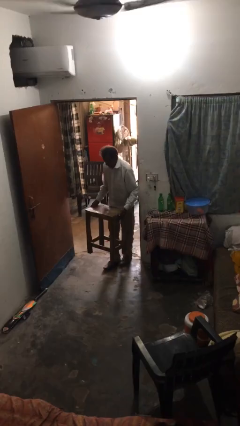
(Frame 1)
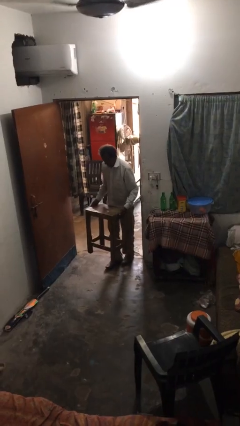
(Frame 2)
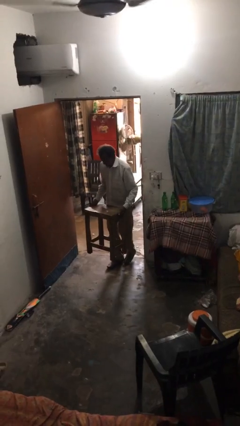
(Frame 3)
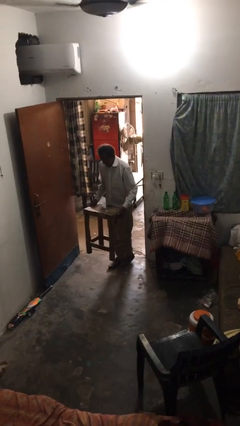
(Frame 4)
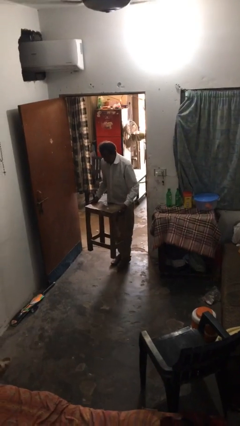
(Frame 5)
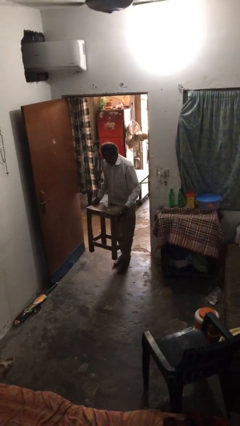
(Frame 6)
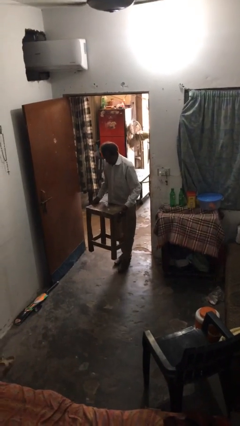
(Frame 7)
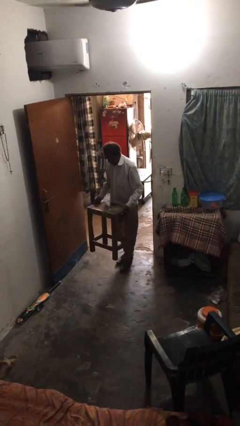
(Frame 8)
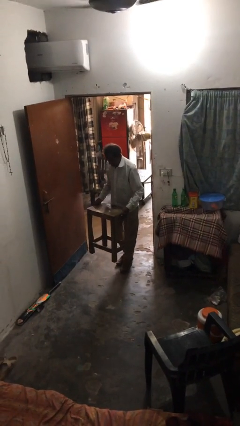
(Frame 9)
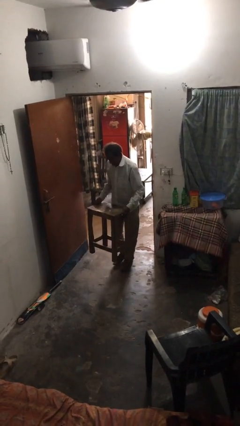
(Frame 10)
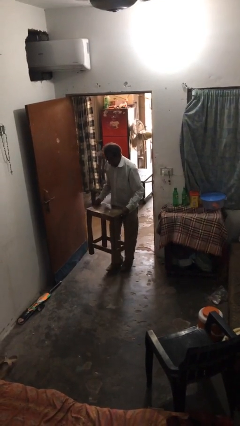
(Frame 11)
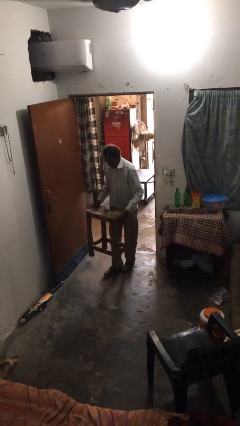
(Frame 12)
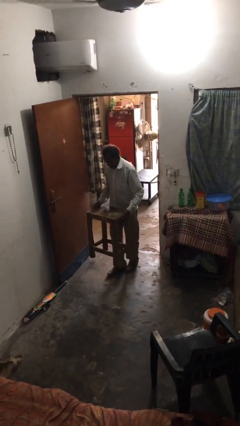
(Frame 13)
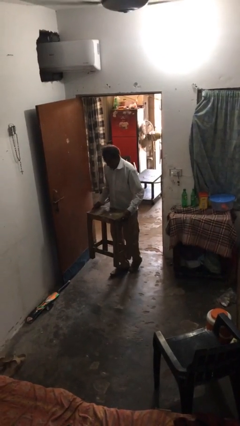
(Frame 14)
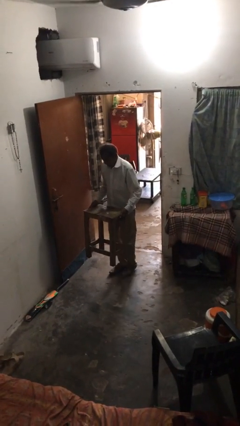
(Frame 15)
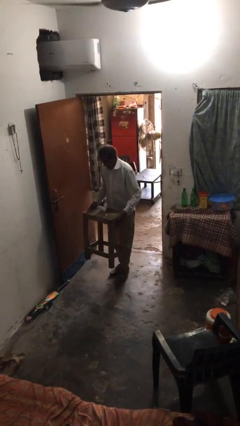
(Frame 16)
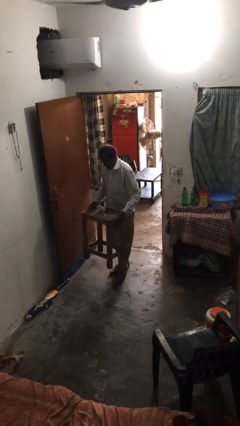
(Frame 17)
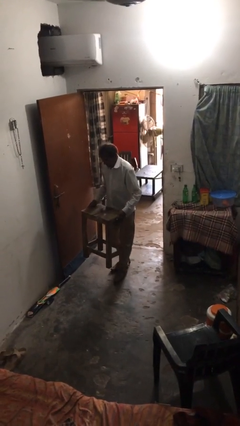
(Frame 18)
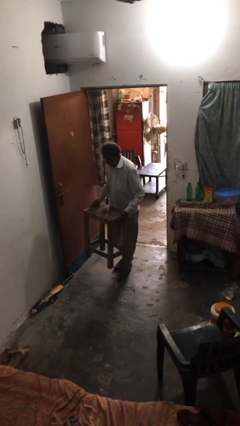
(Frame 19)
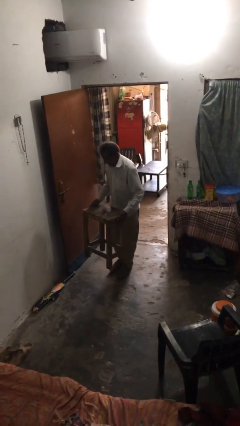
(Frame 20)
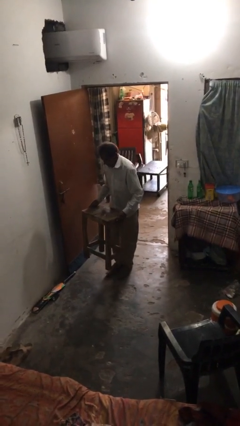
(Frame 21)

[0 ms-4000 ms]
person carries heavy object

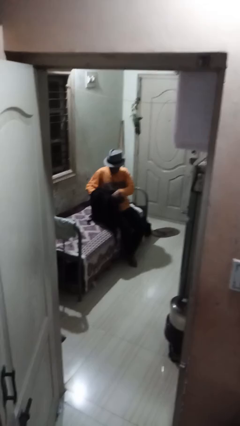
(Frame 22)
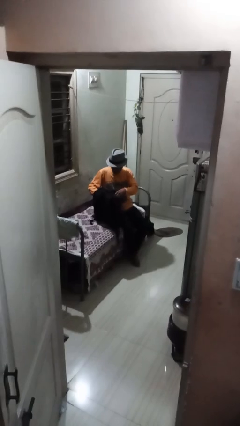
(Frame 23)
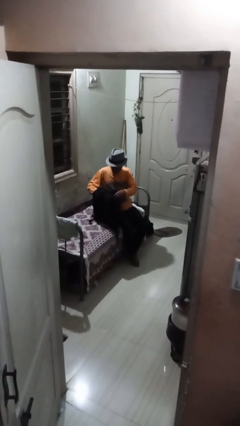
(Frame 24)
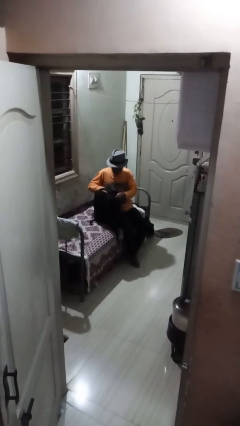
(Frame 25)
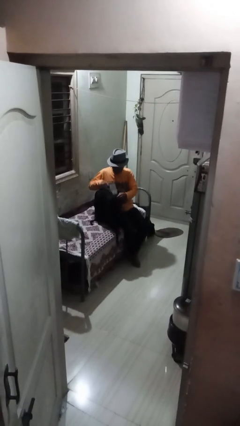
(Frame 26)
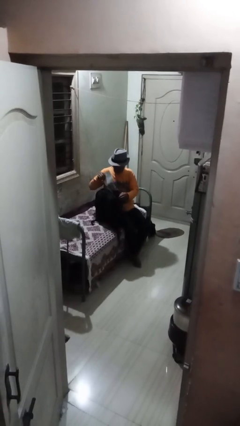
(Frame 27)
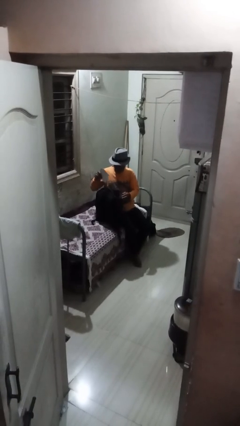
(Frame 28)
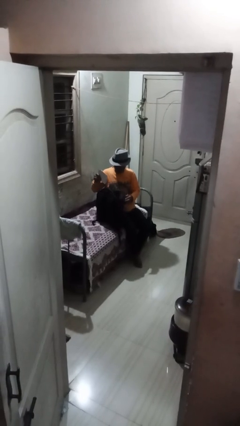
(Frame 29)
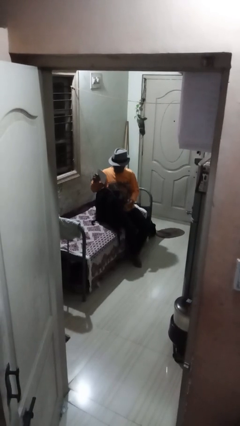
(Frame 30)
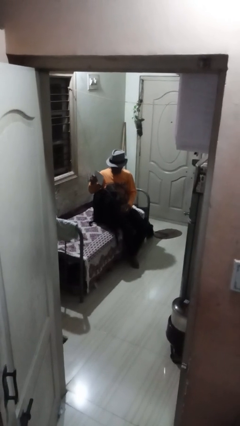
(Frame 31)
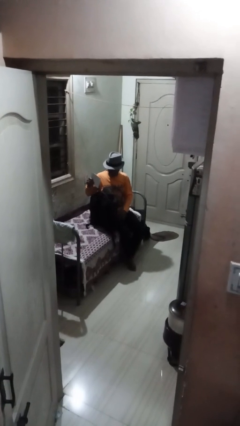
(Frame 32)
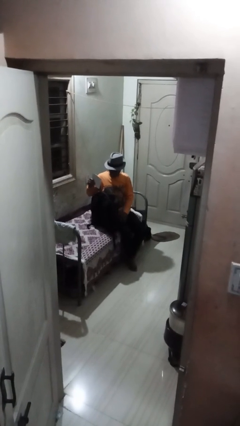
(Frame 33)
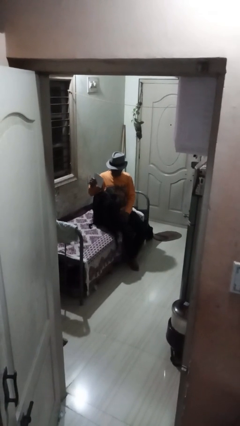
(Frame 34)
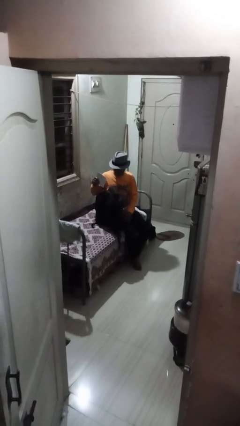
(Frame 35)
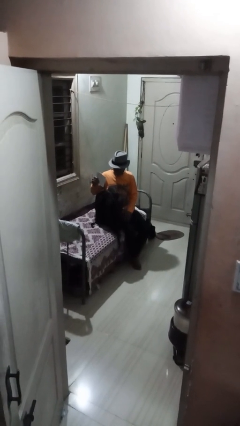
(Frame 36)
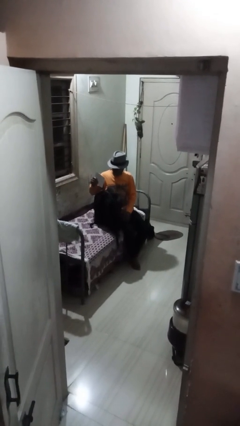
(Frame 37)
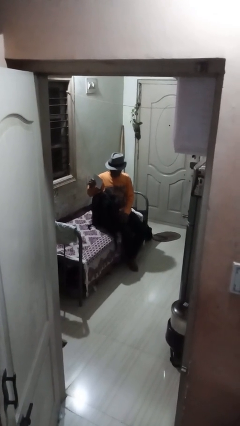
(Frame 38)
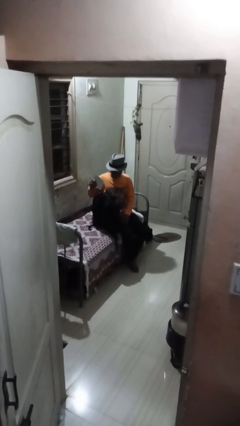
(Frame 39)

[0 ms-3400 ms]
person takes object from backpack

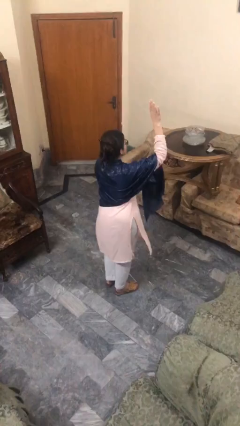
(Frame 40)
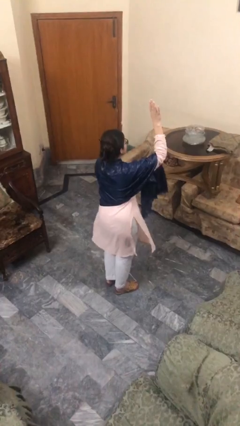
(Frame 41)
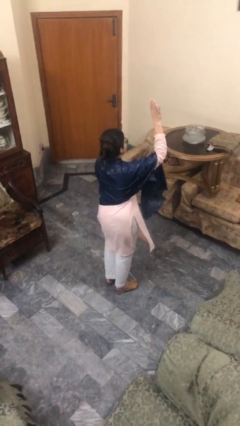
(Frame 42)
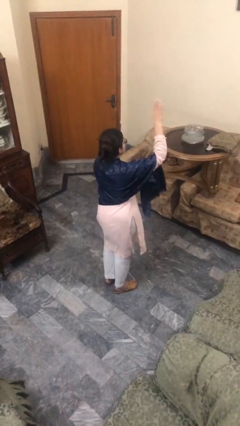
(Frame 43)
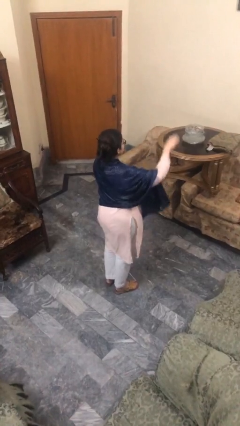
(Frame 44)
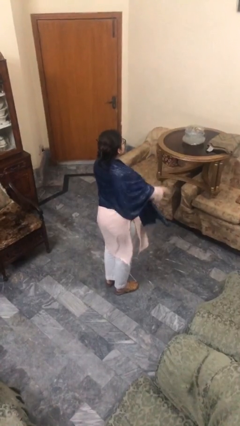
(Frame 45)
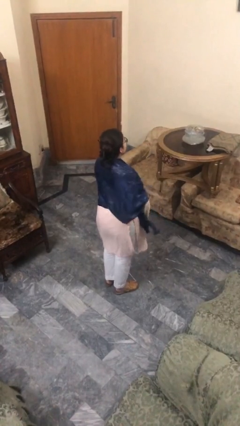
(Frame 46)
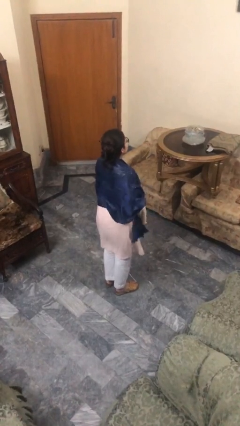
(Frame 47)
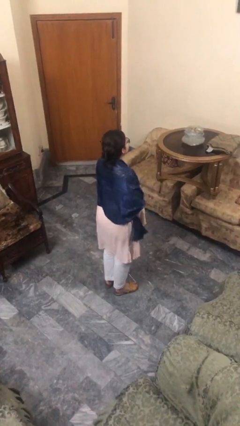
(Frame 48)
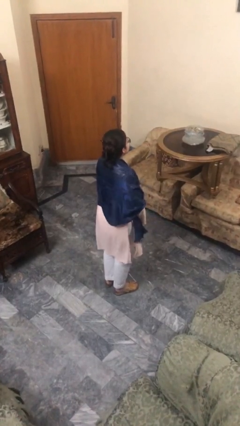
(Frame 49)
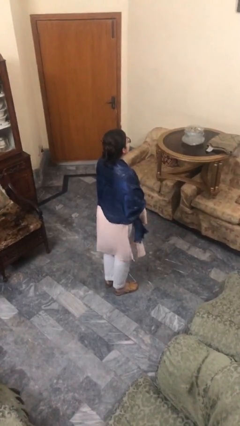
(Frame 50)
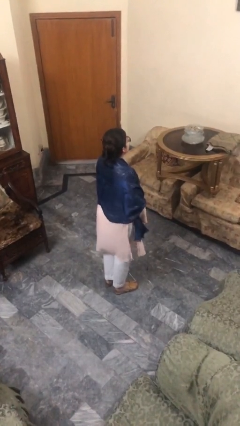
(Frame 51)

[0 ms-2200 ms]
person gestures lower hand

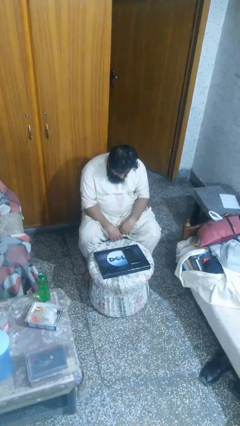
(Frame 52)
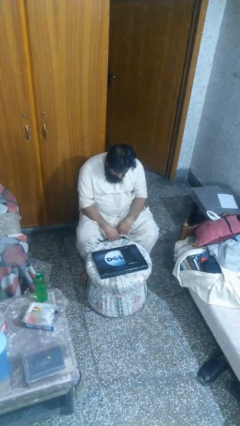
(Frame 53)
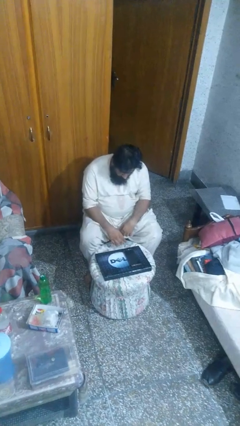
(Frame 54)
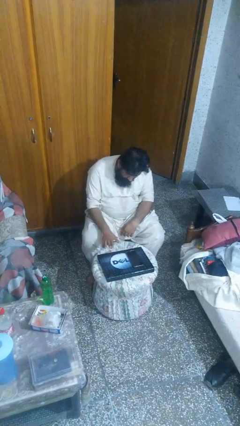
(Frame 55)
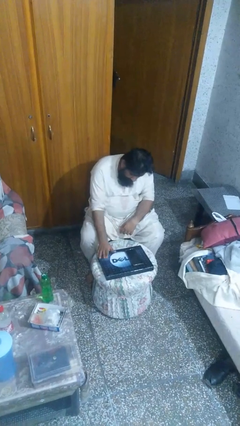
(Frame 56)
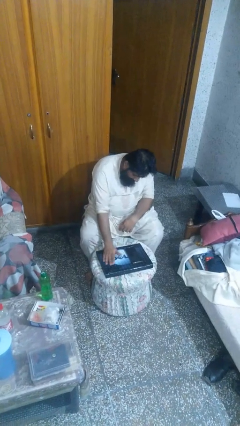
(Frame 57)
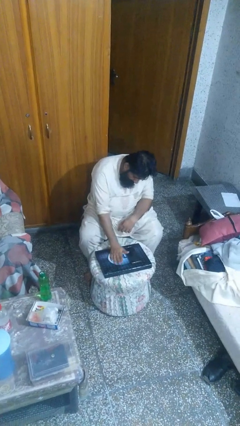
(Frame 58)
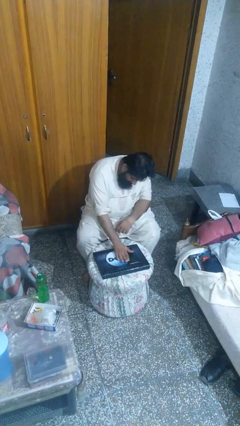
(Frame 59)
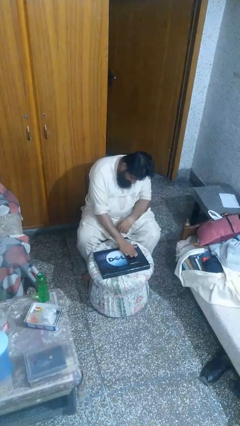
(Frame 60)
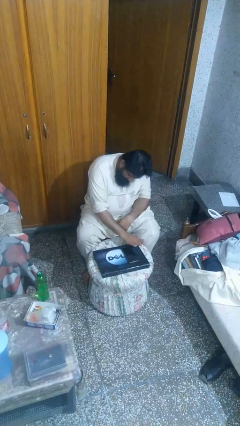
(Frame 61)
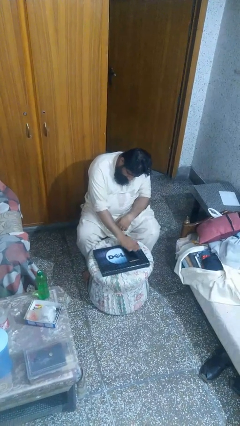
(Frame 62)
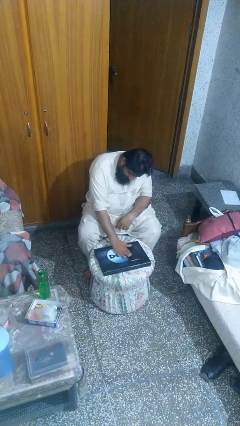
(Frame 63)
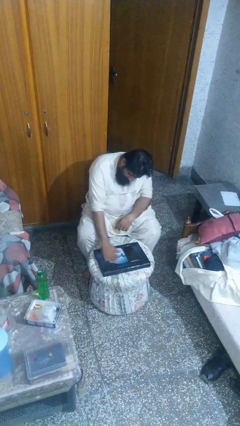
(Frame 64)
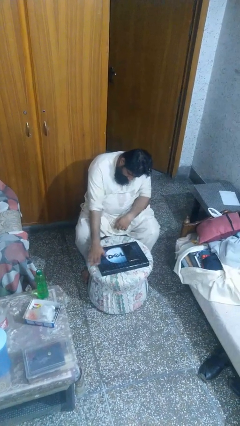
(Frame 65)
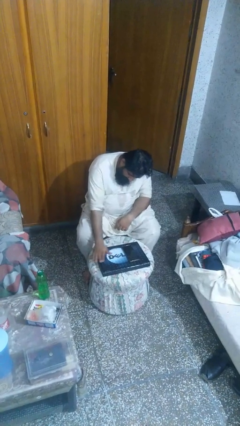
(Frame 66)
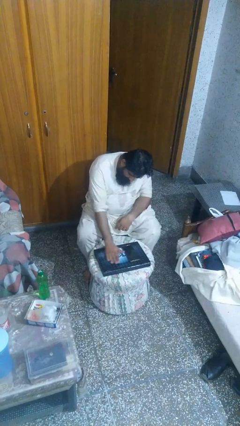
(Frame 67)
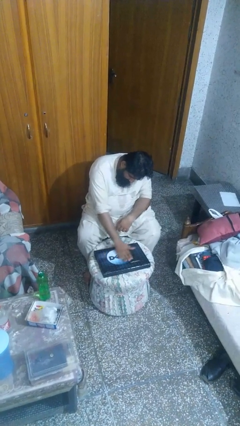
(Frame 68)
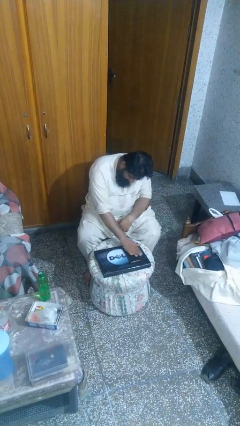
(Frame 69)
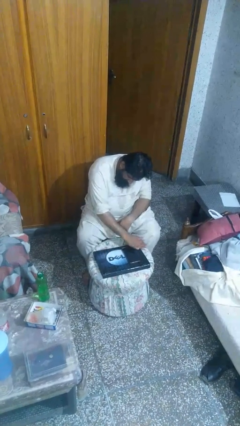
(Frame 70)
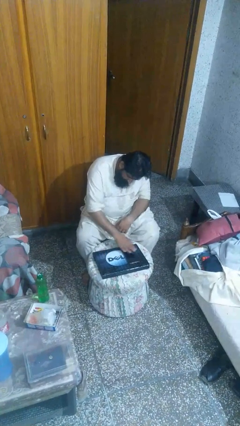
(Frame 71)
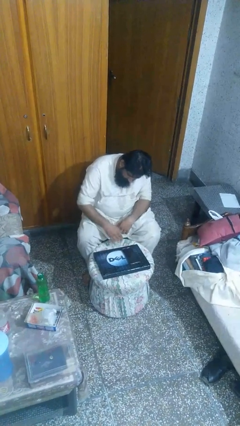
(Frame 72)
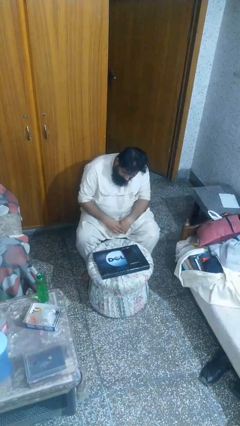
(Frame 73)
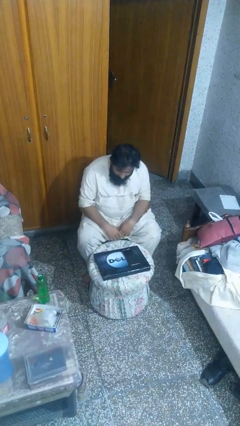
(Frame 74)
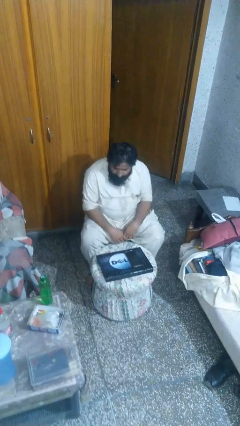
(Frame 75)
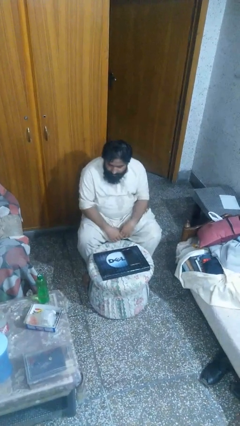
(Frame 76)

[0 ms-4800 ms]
person waves hand over object

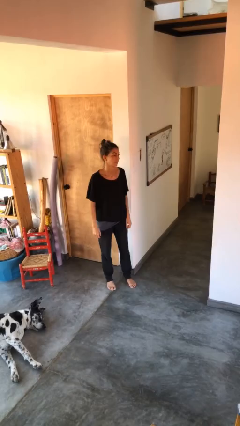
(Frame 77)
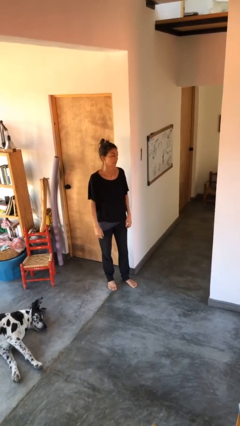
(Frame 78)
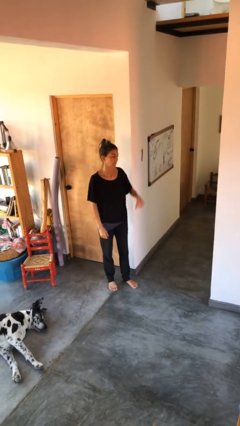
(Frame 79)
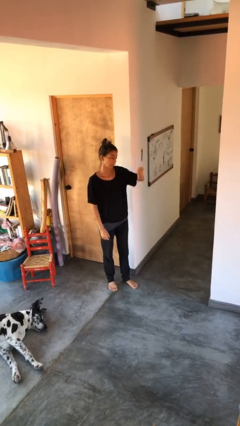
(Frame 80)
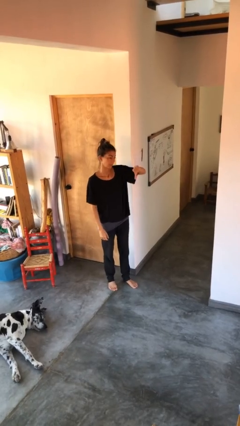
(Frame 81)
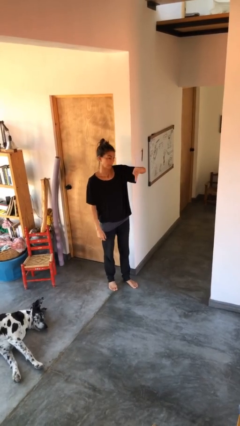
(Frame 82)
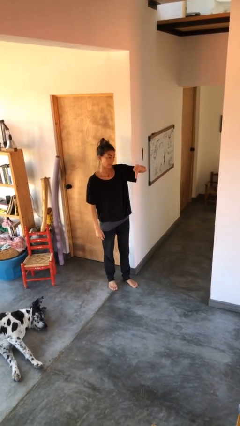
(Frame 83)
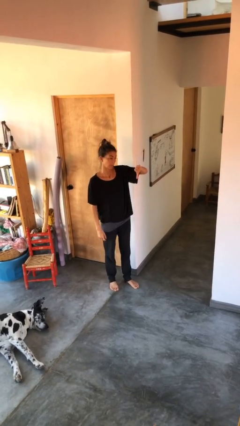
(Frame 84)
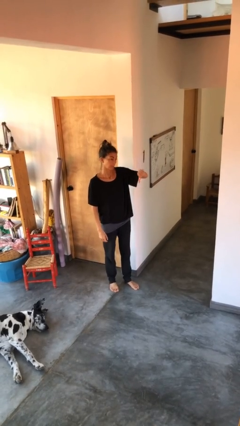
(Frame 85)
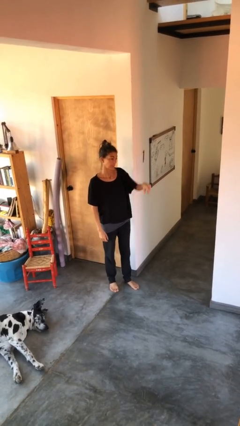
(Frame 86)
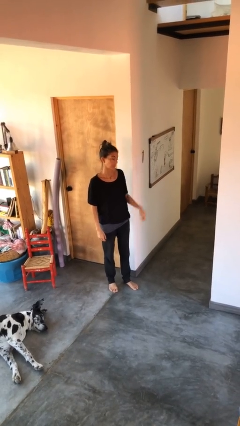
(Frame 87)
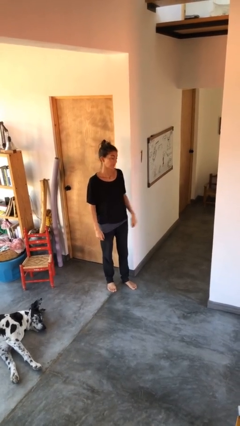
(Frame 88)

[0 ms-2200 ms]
person gestures thumbs down

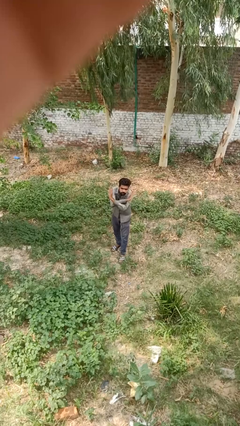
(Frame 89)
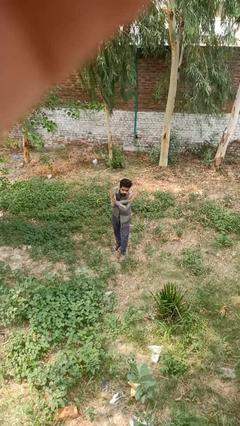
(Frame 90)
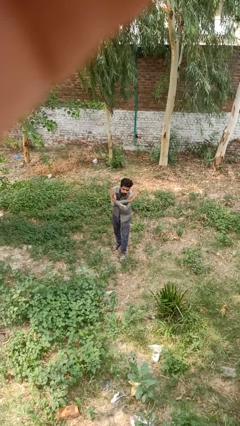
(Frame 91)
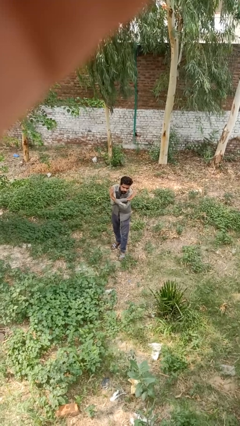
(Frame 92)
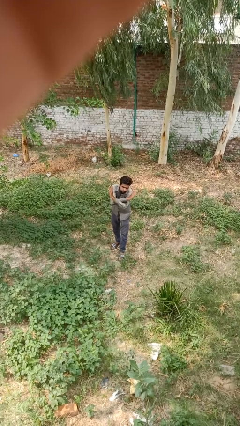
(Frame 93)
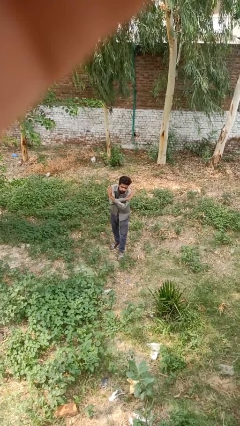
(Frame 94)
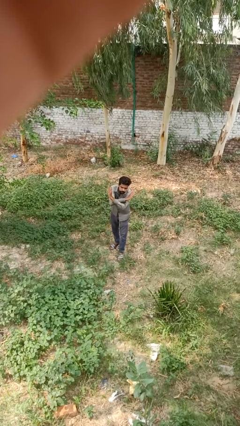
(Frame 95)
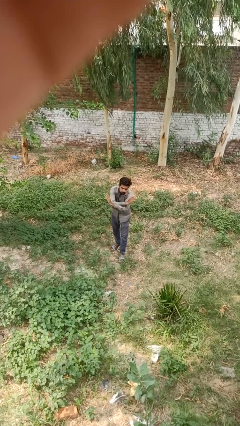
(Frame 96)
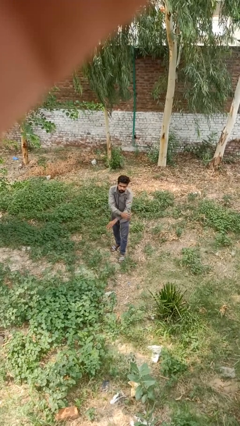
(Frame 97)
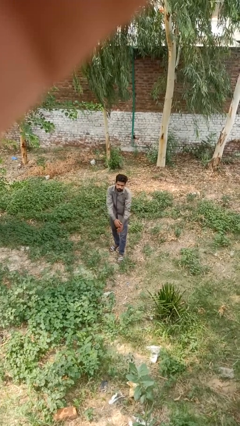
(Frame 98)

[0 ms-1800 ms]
person crosses arms
